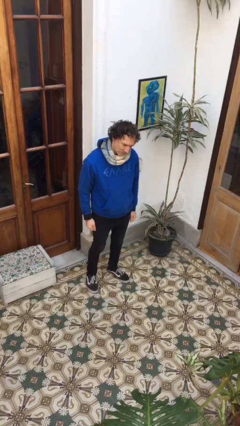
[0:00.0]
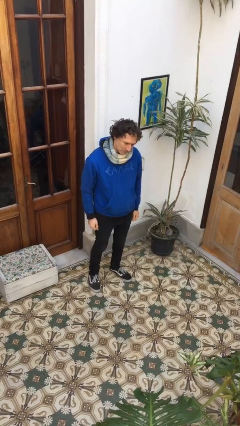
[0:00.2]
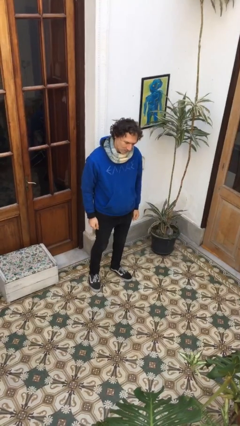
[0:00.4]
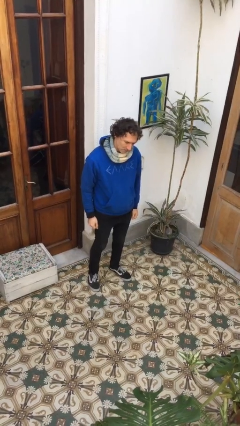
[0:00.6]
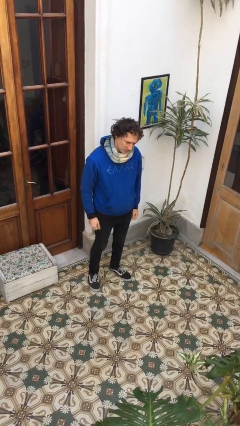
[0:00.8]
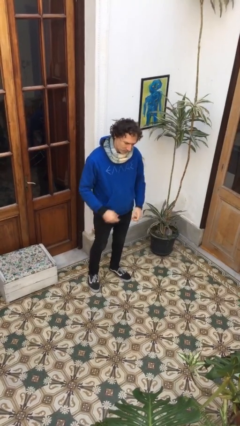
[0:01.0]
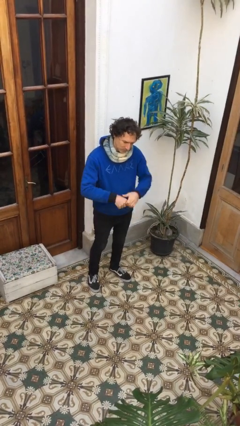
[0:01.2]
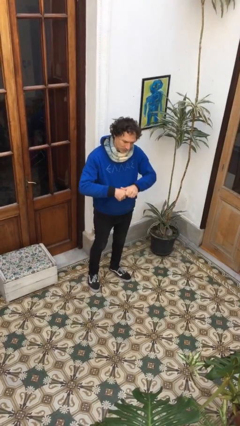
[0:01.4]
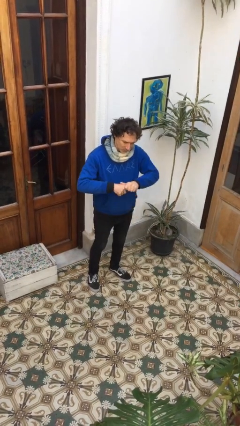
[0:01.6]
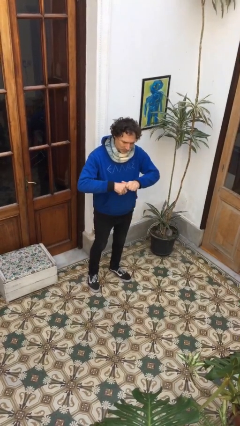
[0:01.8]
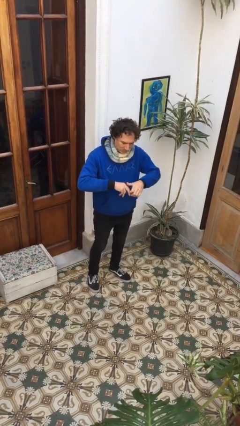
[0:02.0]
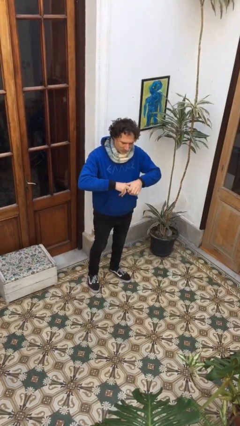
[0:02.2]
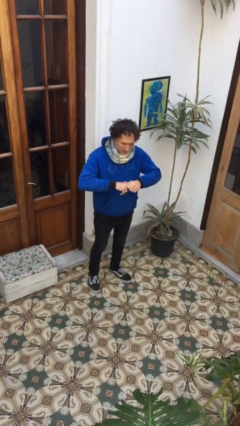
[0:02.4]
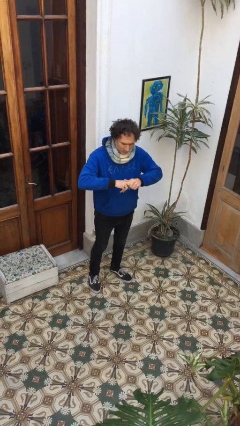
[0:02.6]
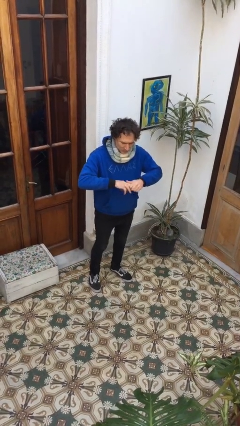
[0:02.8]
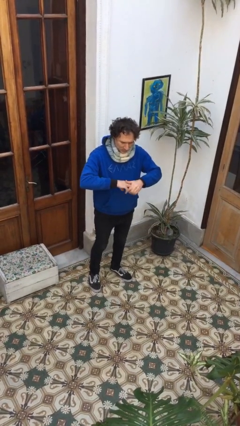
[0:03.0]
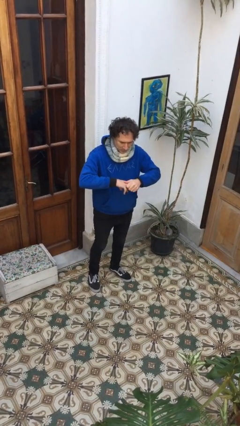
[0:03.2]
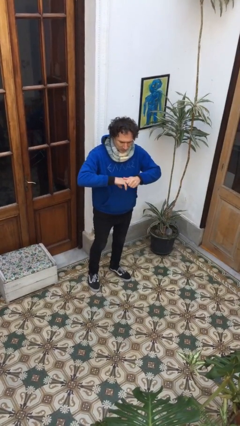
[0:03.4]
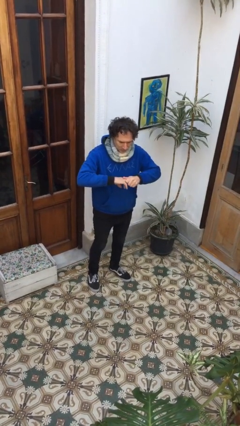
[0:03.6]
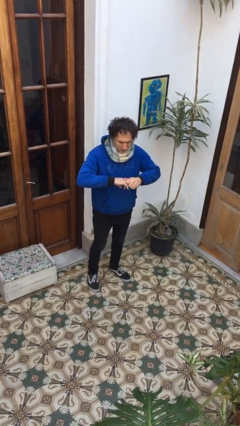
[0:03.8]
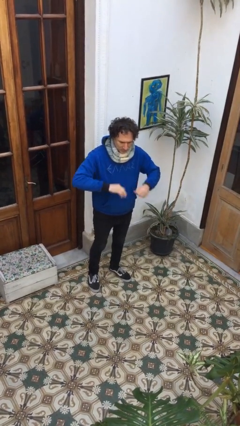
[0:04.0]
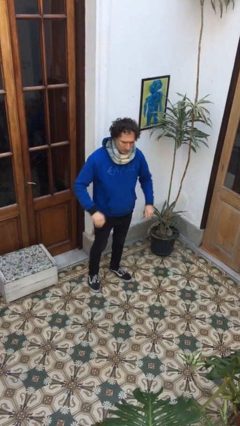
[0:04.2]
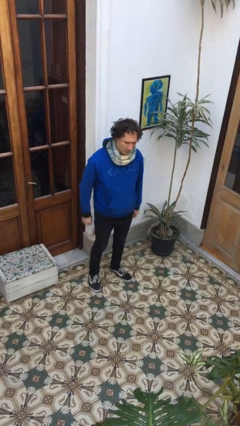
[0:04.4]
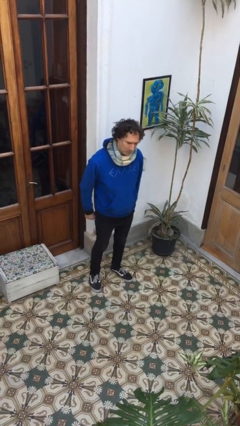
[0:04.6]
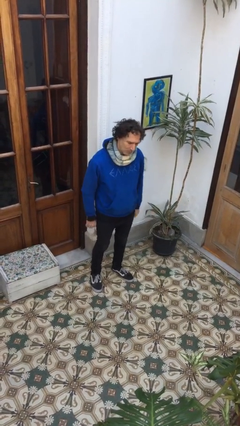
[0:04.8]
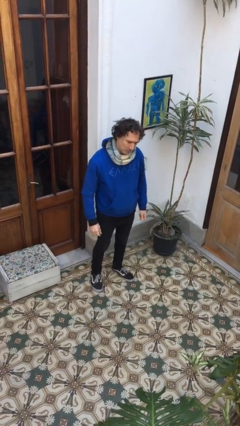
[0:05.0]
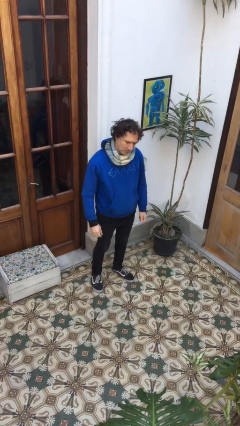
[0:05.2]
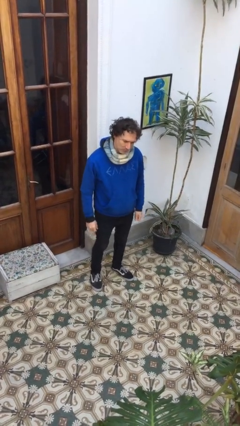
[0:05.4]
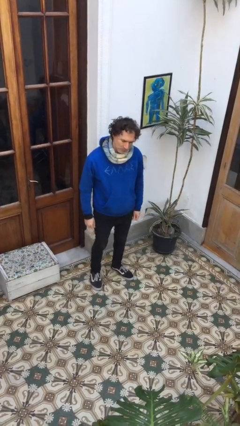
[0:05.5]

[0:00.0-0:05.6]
person cracks knuckles

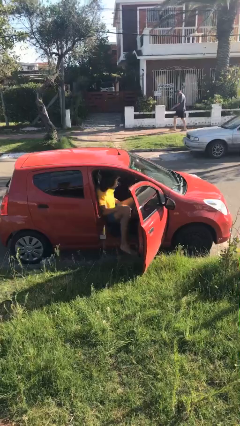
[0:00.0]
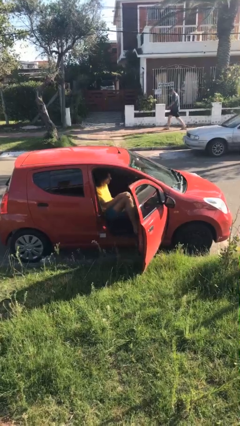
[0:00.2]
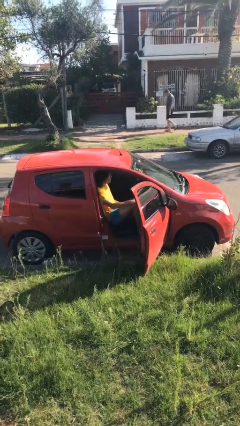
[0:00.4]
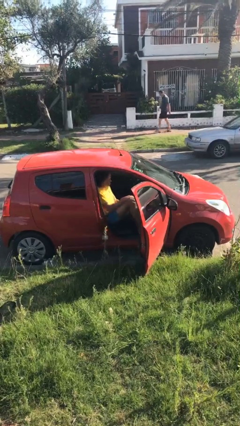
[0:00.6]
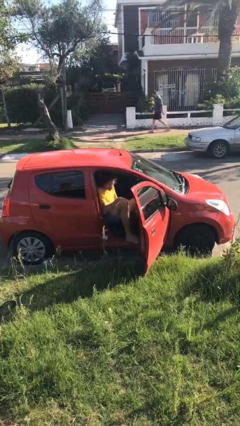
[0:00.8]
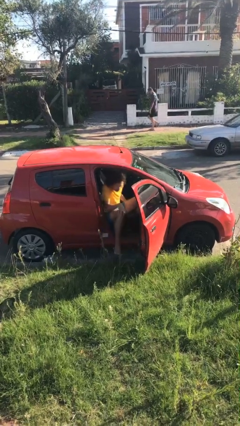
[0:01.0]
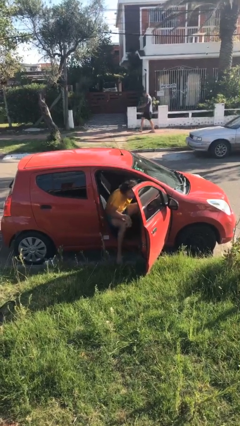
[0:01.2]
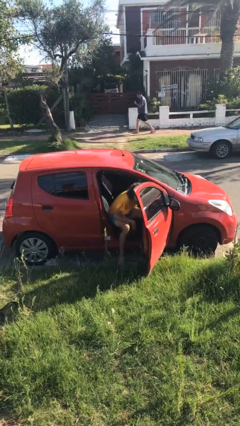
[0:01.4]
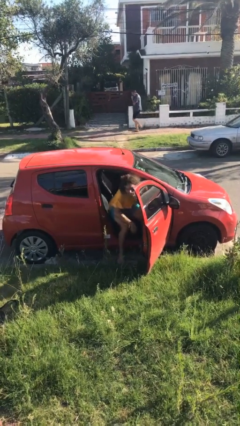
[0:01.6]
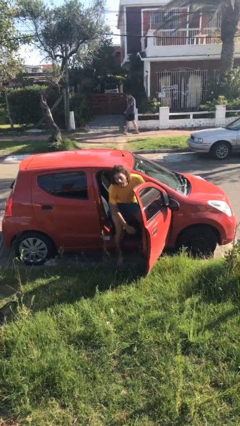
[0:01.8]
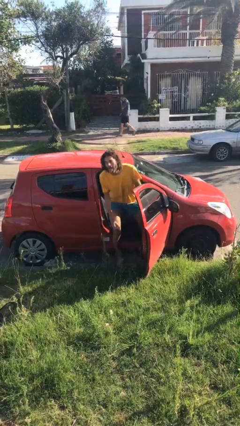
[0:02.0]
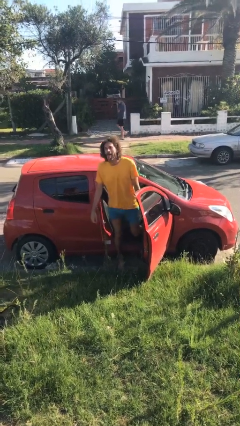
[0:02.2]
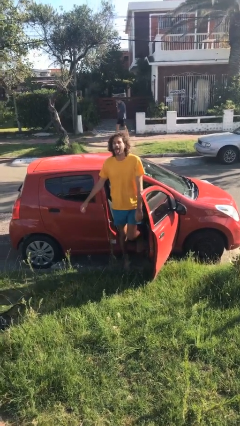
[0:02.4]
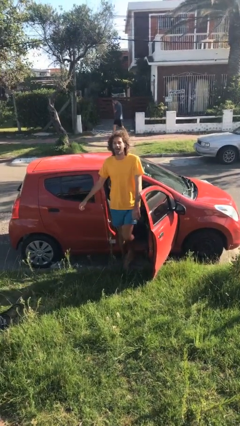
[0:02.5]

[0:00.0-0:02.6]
person exits car

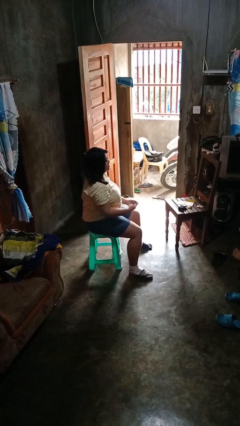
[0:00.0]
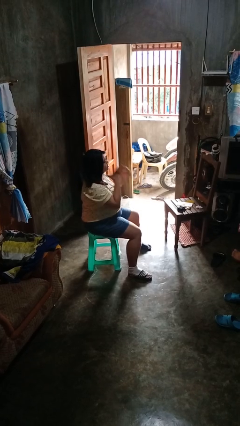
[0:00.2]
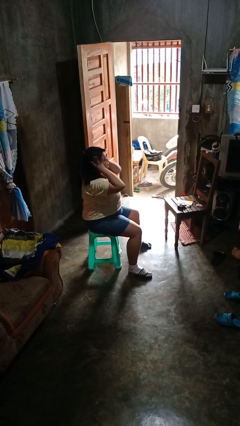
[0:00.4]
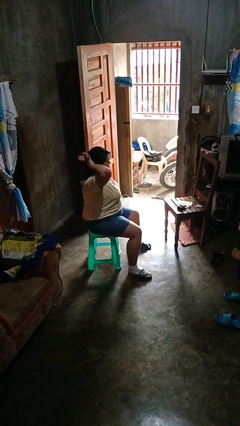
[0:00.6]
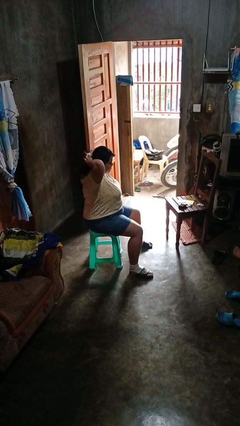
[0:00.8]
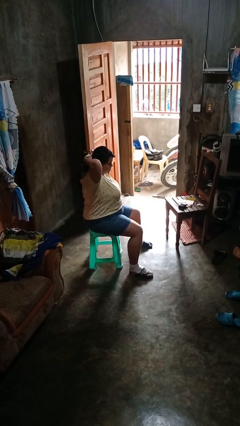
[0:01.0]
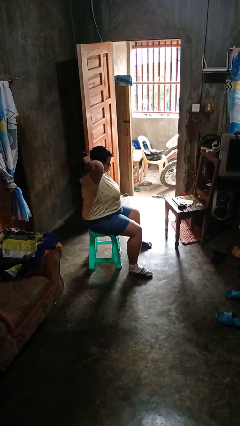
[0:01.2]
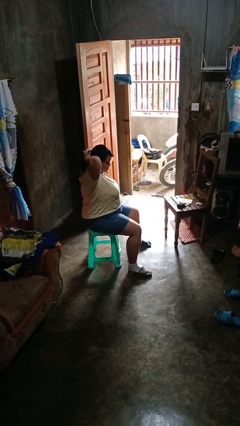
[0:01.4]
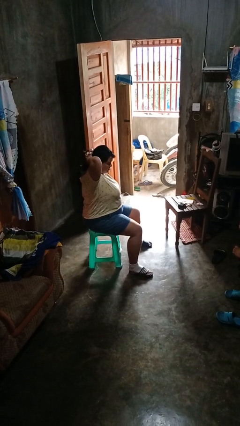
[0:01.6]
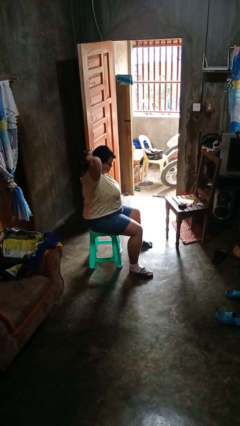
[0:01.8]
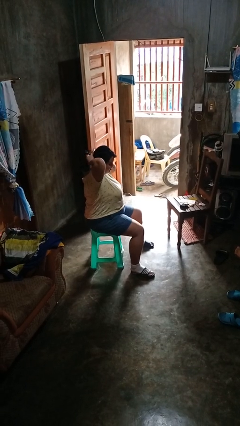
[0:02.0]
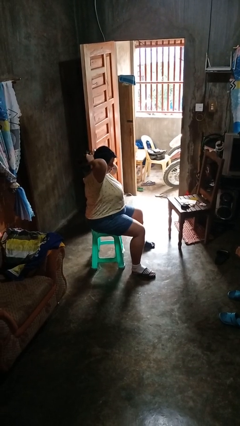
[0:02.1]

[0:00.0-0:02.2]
person puts hair in ponytail

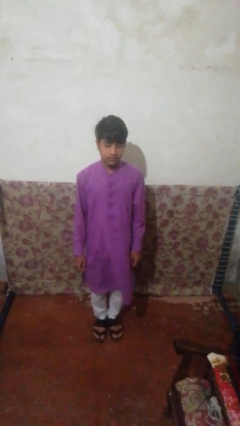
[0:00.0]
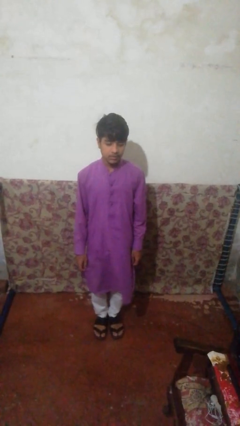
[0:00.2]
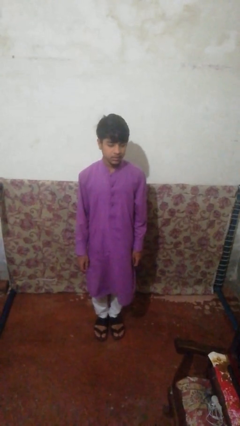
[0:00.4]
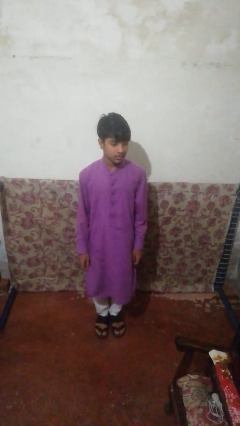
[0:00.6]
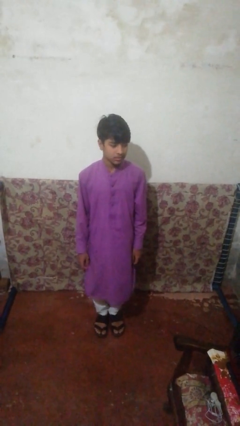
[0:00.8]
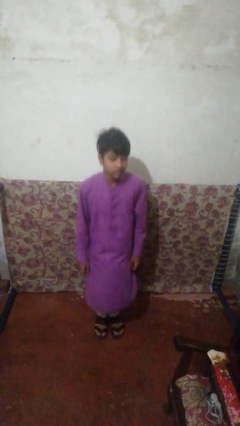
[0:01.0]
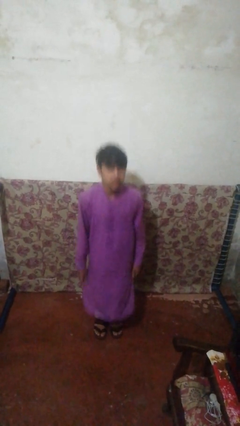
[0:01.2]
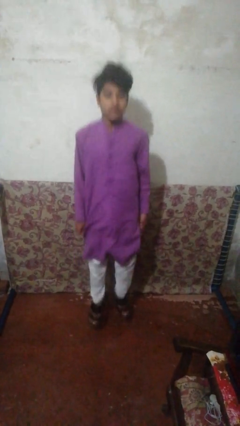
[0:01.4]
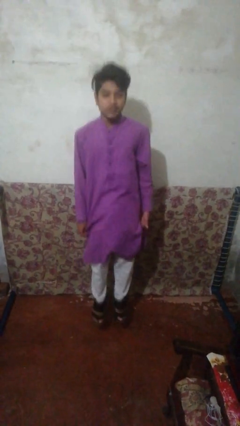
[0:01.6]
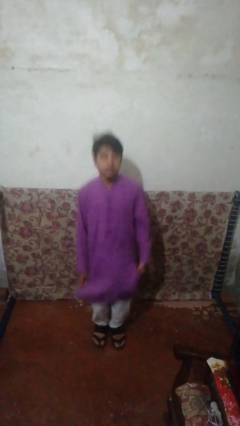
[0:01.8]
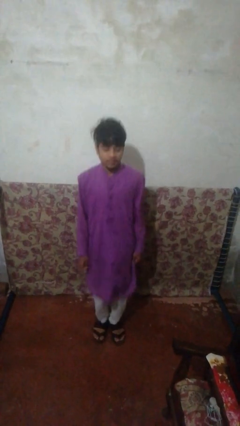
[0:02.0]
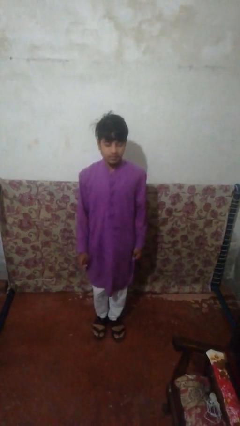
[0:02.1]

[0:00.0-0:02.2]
person jumps

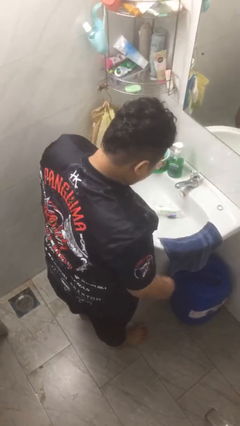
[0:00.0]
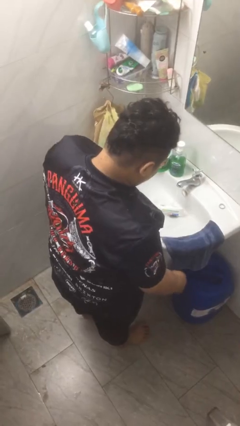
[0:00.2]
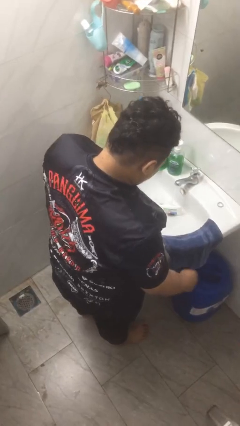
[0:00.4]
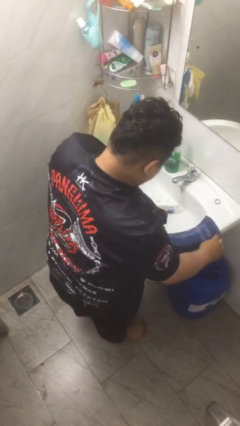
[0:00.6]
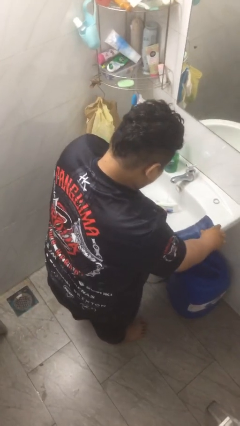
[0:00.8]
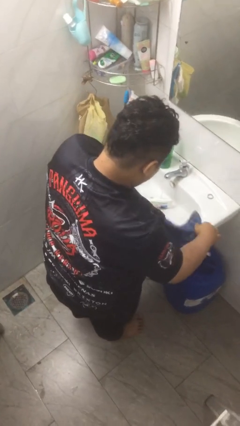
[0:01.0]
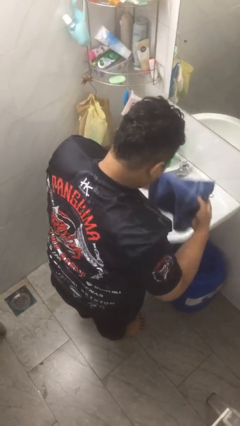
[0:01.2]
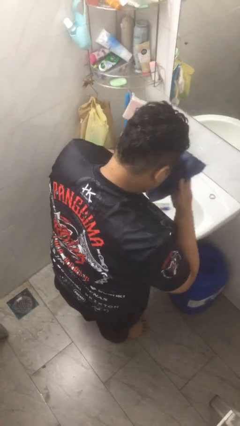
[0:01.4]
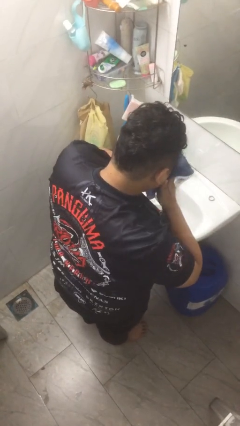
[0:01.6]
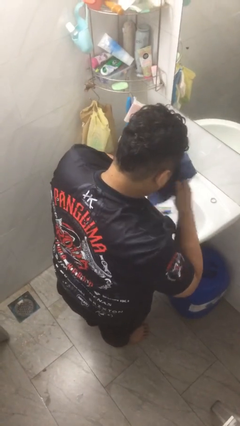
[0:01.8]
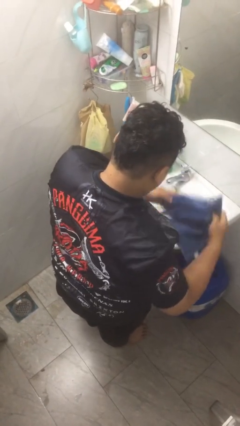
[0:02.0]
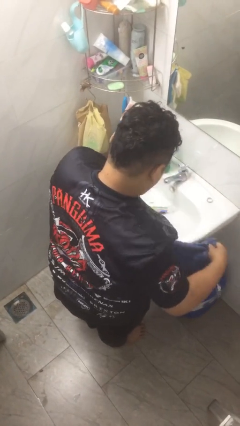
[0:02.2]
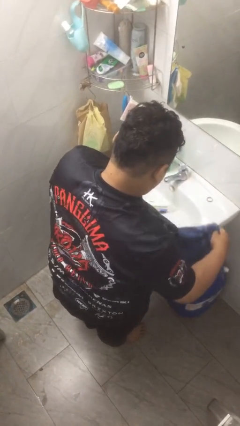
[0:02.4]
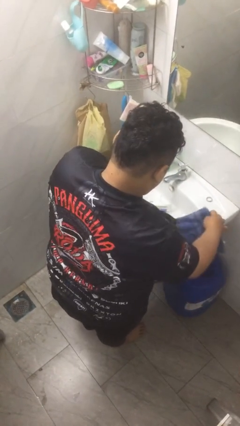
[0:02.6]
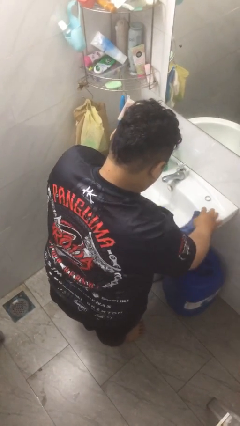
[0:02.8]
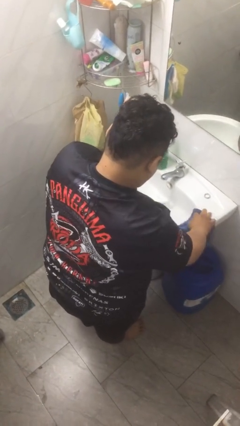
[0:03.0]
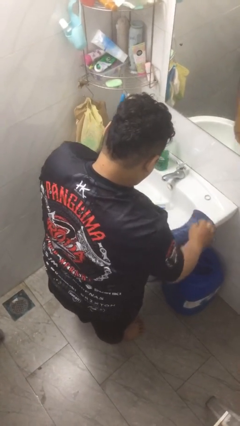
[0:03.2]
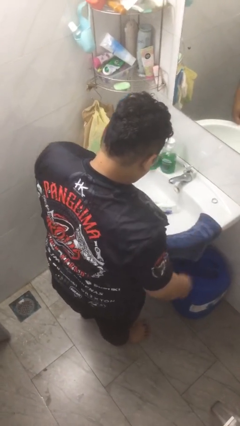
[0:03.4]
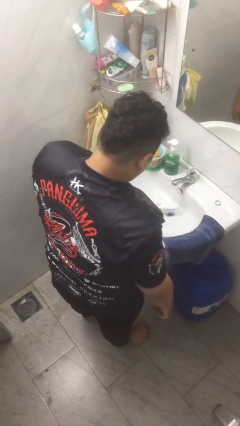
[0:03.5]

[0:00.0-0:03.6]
person dries face with towel

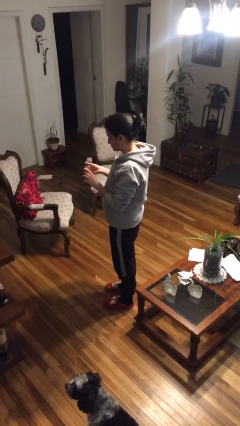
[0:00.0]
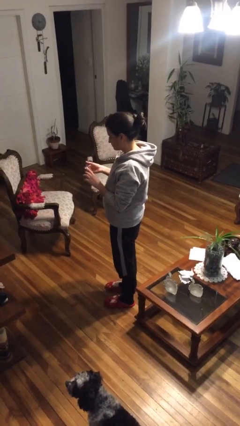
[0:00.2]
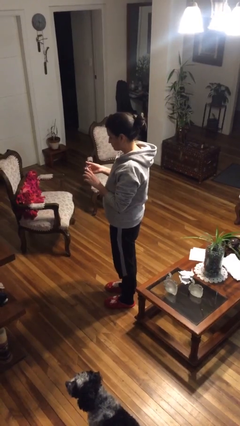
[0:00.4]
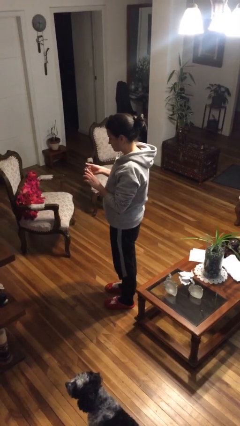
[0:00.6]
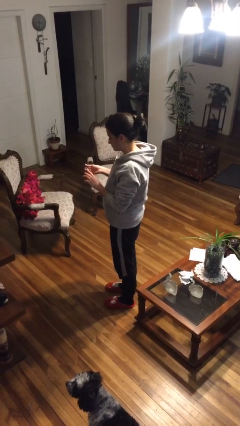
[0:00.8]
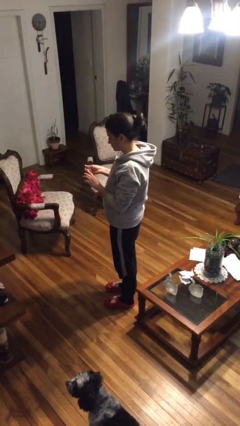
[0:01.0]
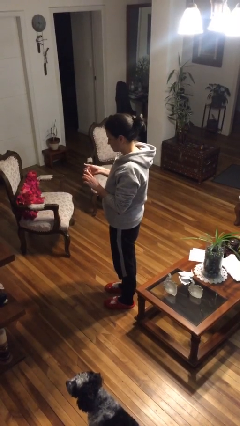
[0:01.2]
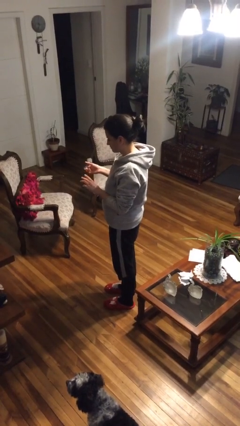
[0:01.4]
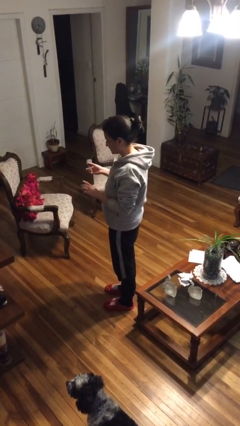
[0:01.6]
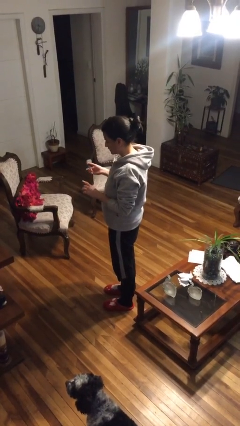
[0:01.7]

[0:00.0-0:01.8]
person clips fingernails
